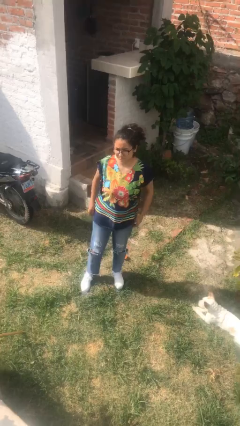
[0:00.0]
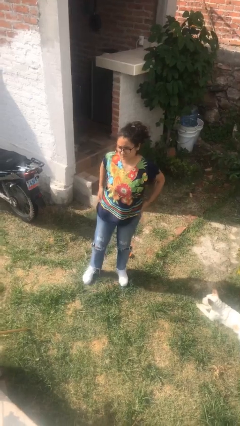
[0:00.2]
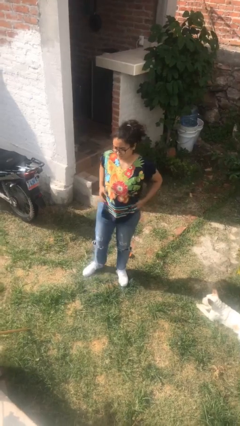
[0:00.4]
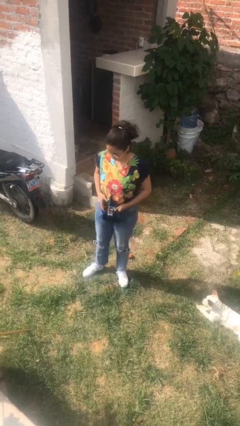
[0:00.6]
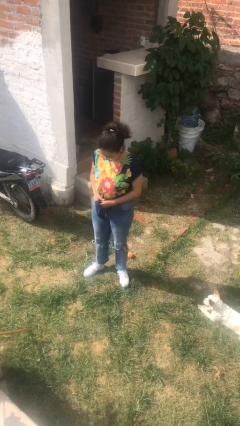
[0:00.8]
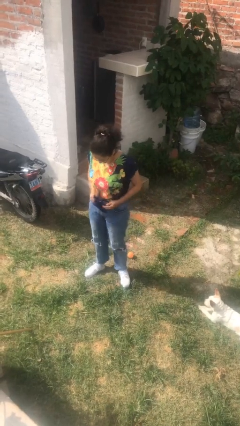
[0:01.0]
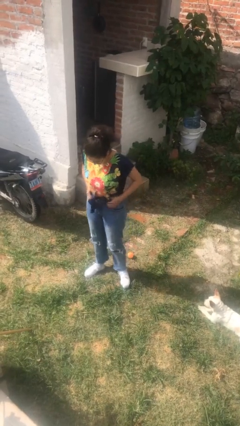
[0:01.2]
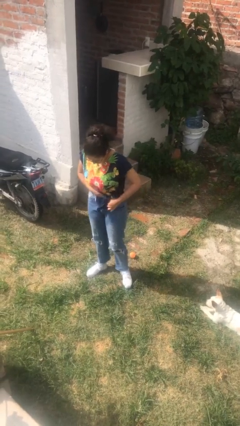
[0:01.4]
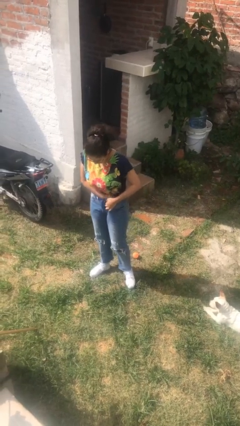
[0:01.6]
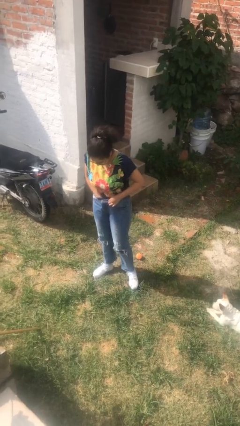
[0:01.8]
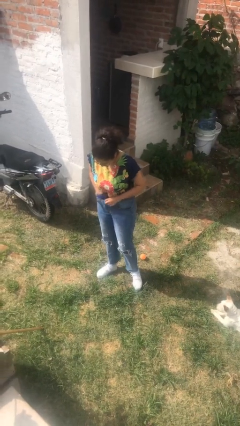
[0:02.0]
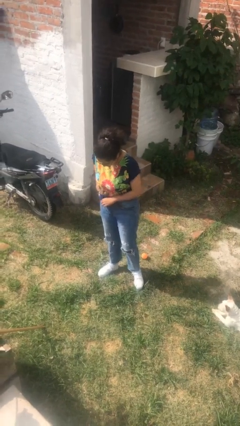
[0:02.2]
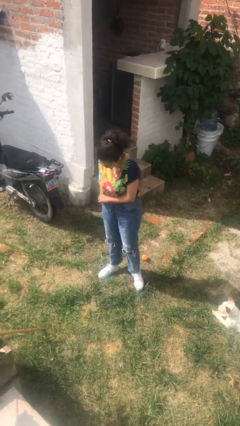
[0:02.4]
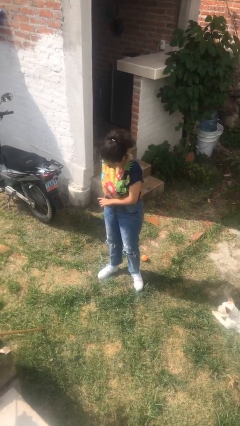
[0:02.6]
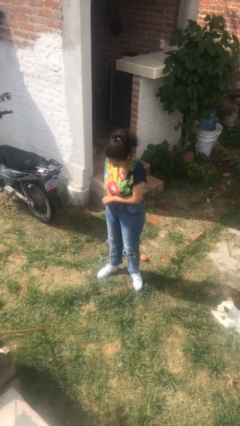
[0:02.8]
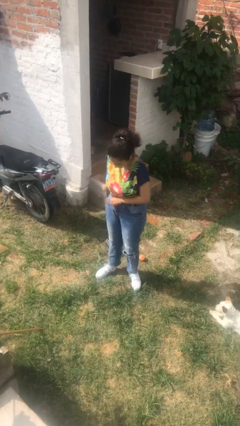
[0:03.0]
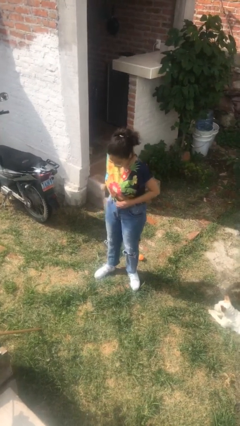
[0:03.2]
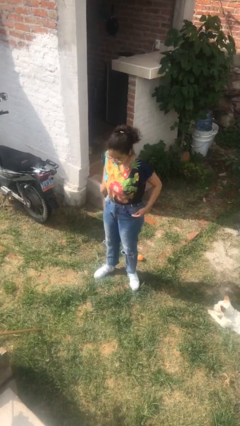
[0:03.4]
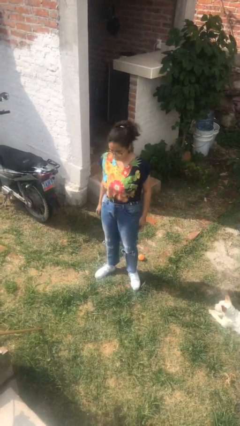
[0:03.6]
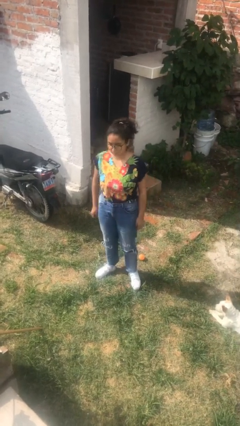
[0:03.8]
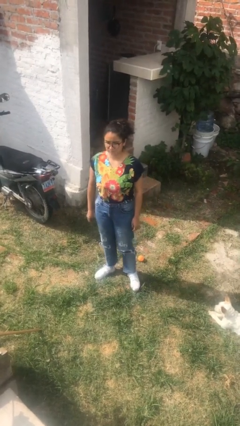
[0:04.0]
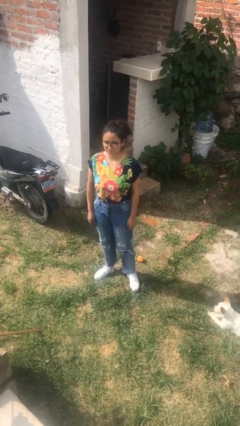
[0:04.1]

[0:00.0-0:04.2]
person tucks in shirt

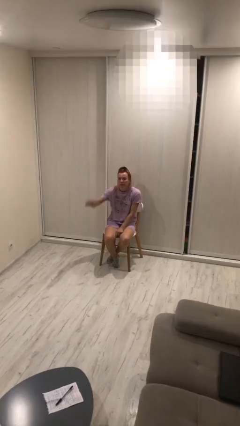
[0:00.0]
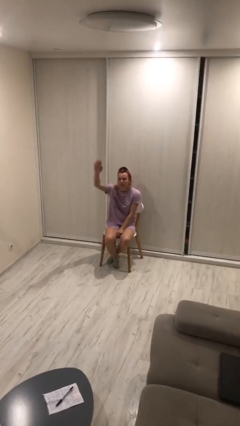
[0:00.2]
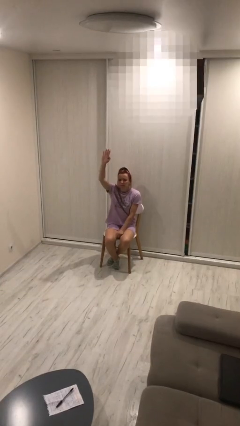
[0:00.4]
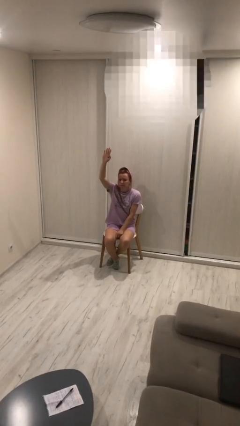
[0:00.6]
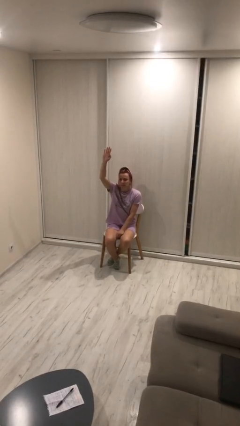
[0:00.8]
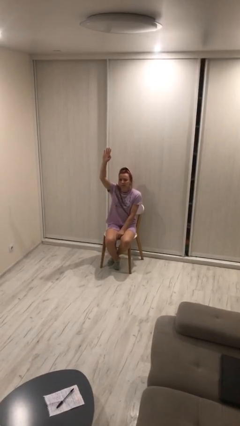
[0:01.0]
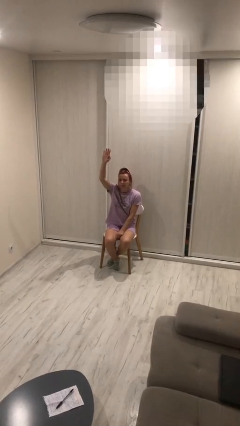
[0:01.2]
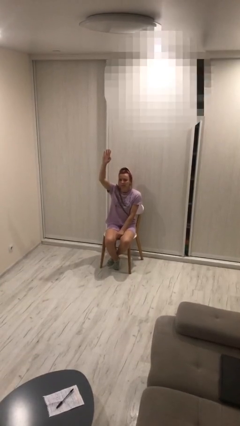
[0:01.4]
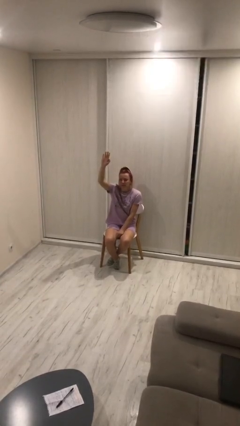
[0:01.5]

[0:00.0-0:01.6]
person gestures raise hand

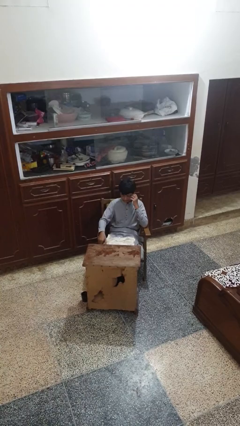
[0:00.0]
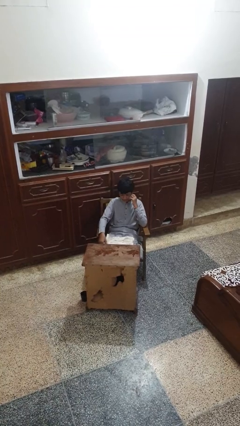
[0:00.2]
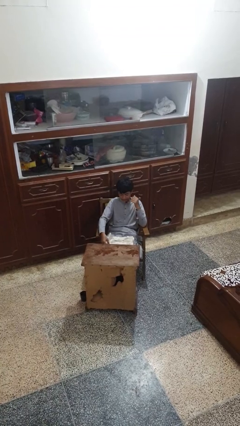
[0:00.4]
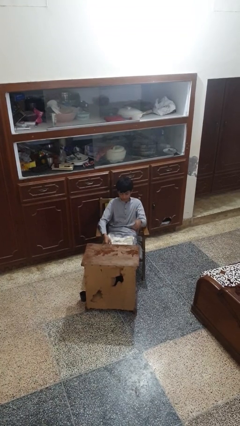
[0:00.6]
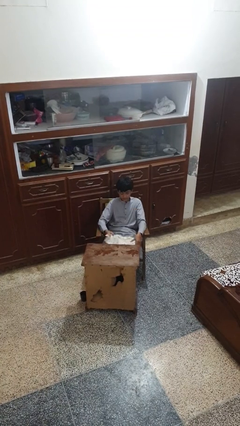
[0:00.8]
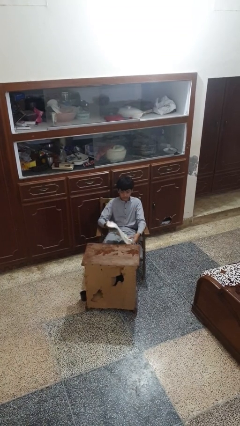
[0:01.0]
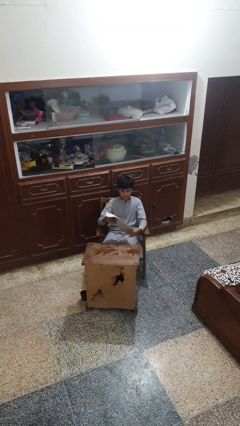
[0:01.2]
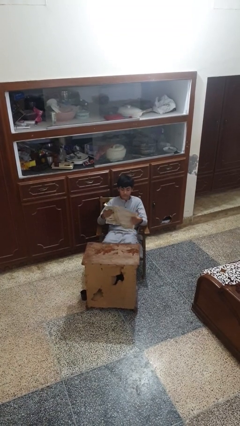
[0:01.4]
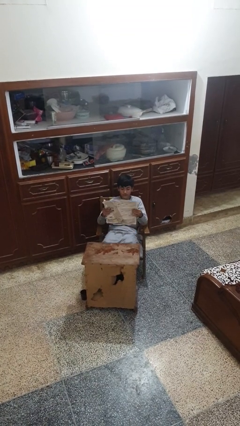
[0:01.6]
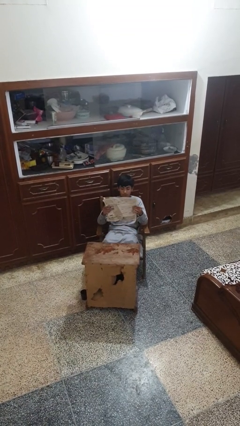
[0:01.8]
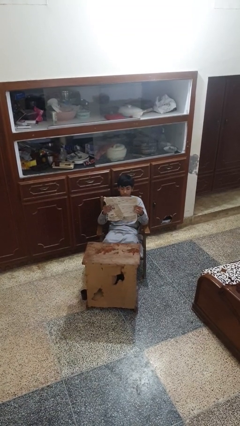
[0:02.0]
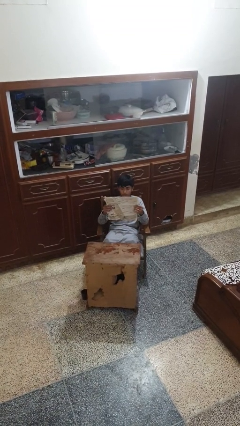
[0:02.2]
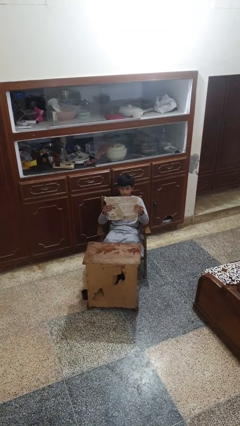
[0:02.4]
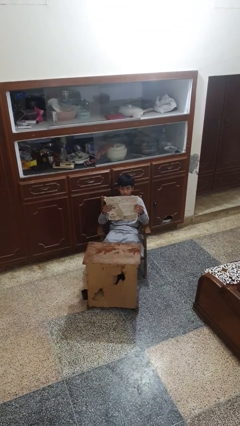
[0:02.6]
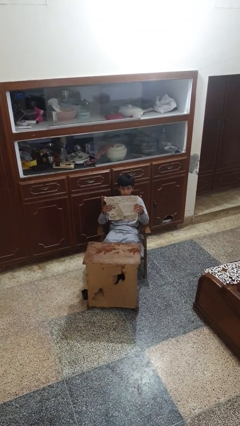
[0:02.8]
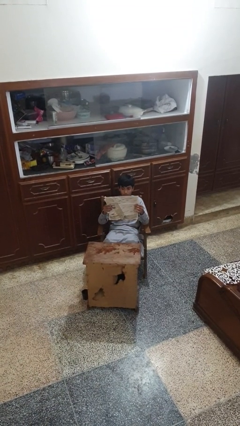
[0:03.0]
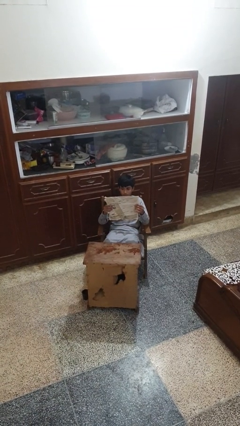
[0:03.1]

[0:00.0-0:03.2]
person reads newspaper

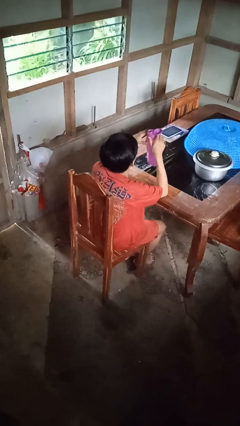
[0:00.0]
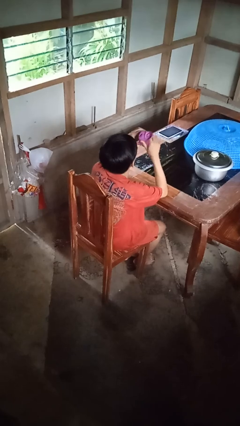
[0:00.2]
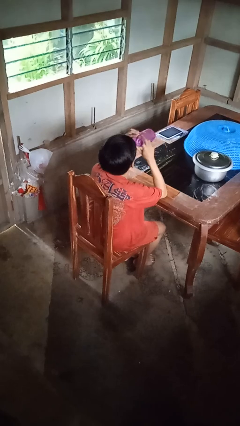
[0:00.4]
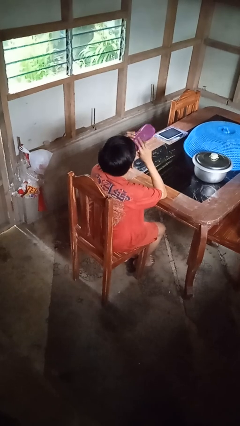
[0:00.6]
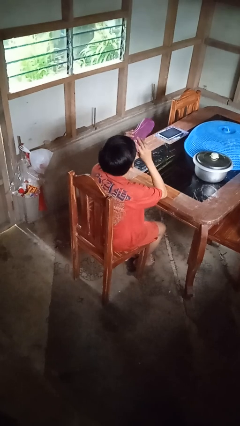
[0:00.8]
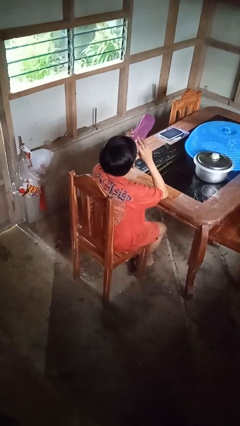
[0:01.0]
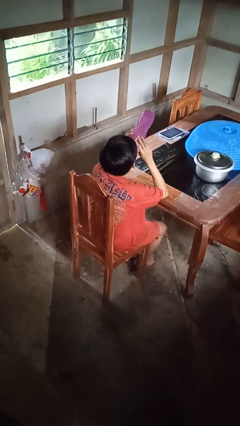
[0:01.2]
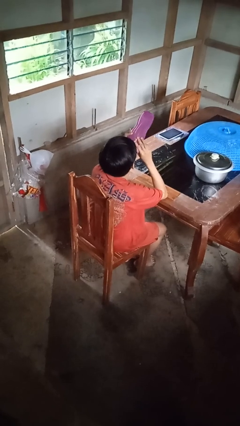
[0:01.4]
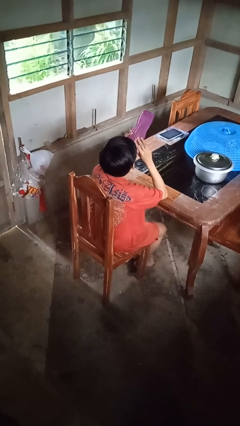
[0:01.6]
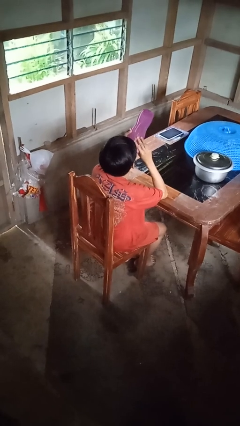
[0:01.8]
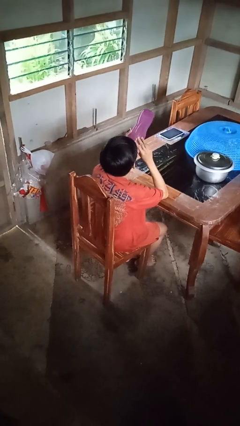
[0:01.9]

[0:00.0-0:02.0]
person drinks from bottle

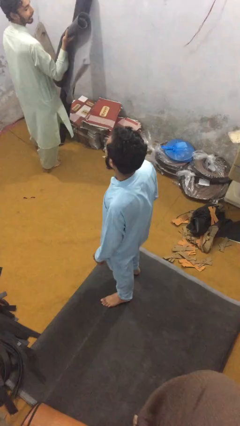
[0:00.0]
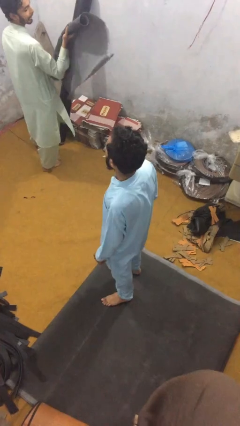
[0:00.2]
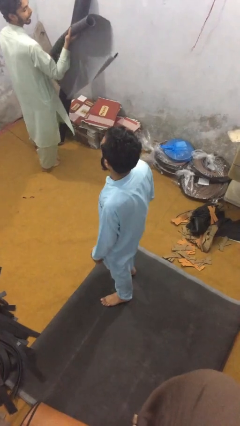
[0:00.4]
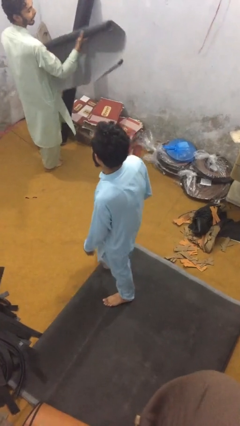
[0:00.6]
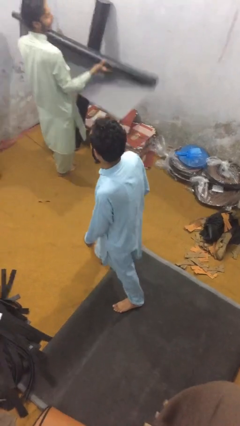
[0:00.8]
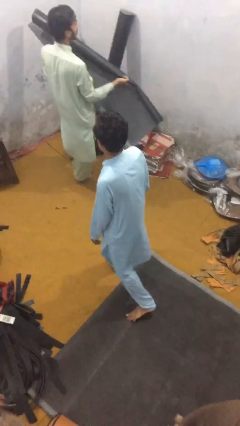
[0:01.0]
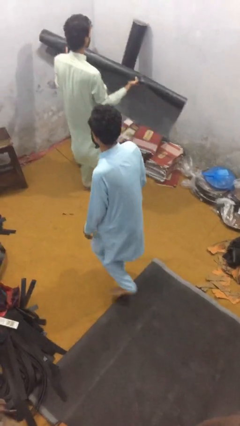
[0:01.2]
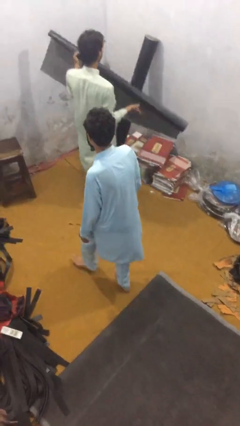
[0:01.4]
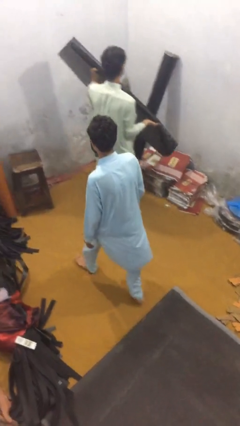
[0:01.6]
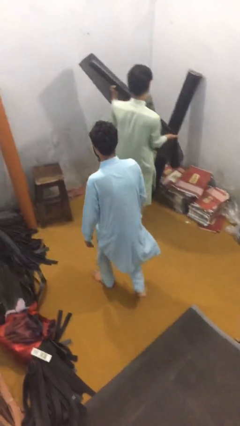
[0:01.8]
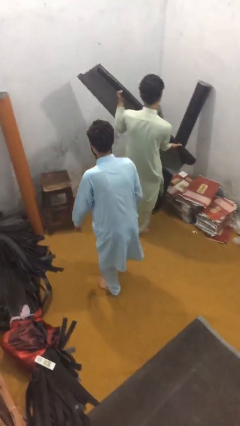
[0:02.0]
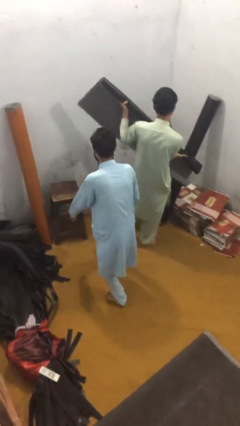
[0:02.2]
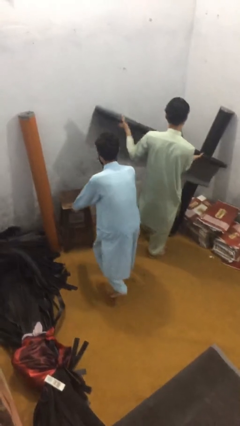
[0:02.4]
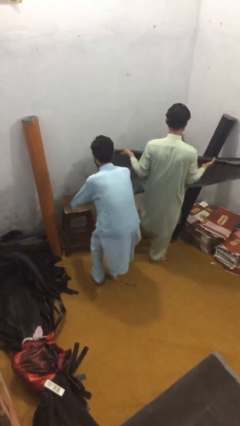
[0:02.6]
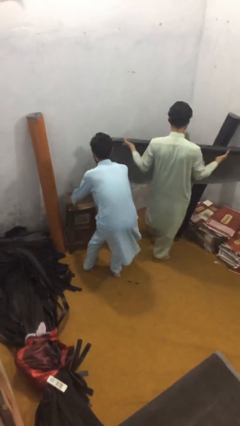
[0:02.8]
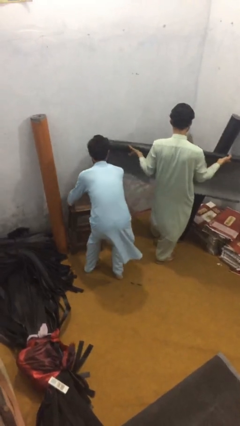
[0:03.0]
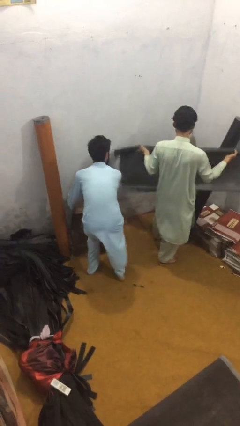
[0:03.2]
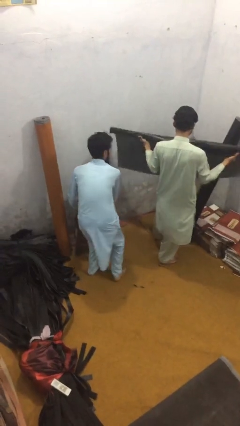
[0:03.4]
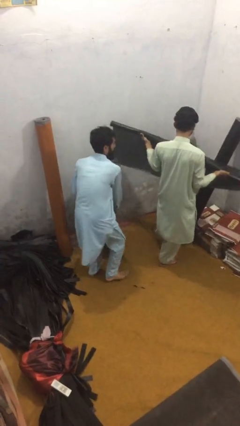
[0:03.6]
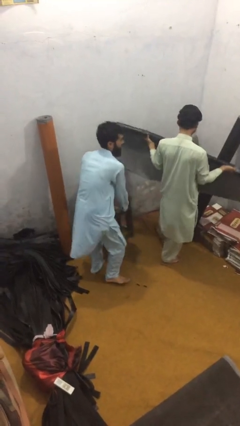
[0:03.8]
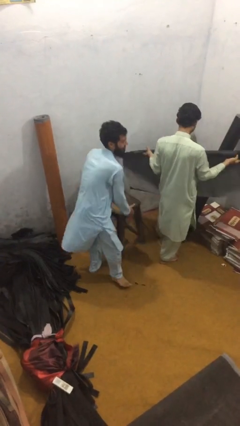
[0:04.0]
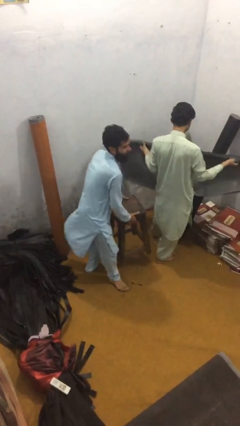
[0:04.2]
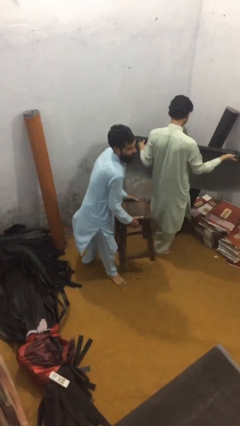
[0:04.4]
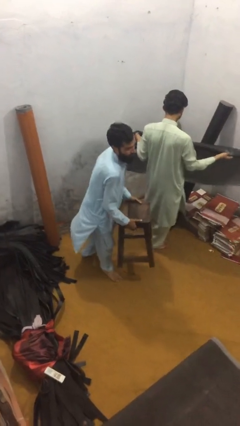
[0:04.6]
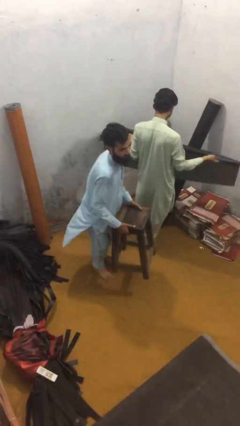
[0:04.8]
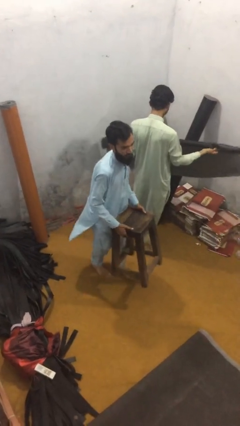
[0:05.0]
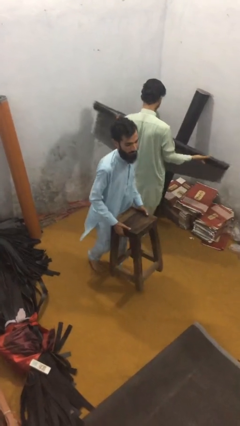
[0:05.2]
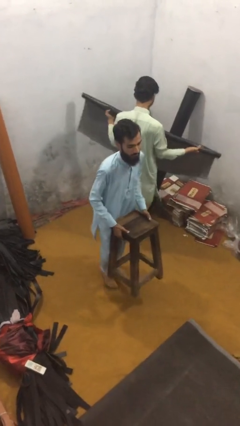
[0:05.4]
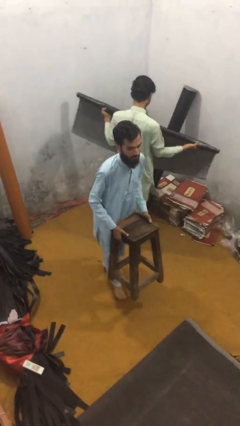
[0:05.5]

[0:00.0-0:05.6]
person steals object from person

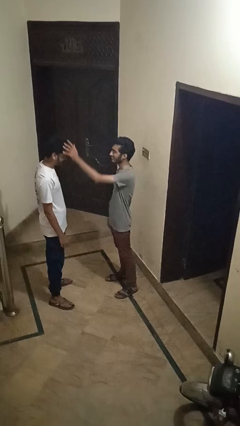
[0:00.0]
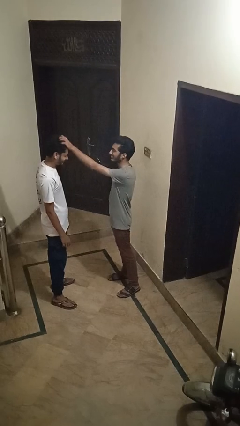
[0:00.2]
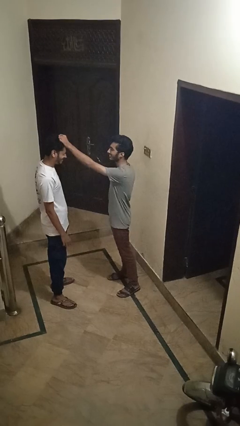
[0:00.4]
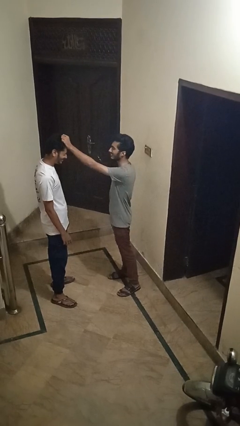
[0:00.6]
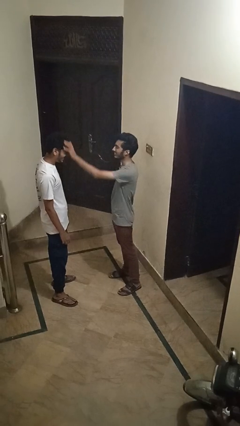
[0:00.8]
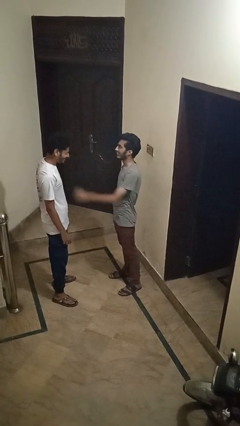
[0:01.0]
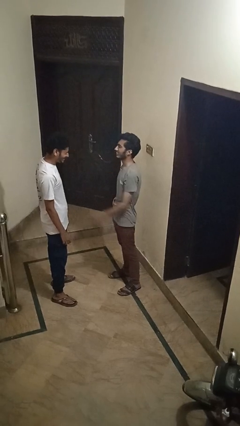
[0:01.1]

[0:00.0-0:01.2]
person grabs person by hair
